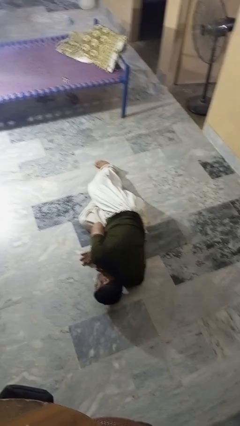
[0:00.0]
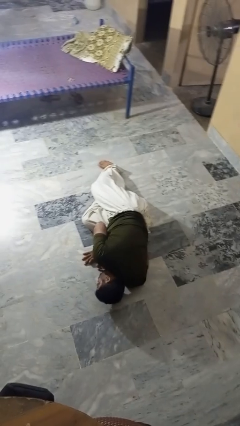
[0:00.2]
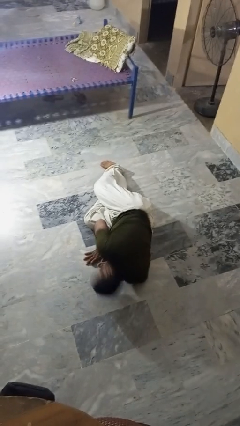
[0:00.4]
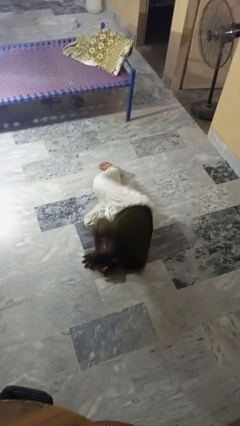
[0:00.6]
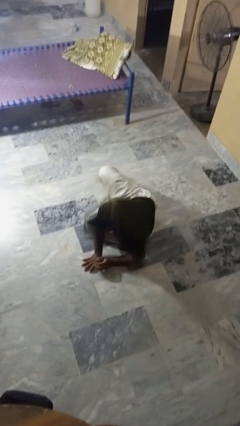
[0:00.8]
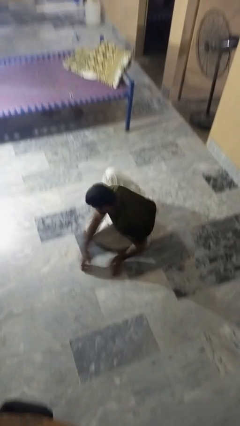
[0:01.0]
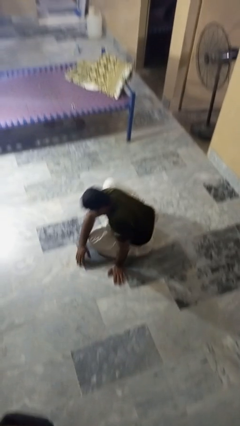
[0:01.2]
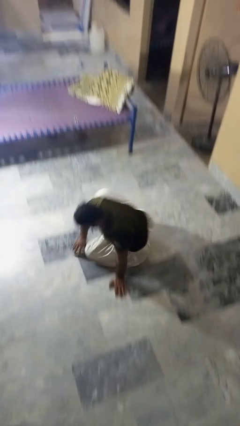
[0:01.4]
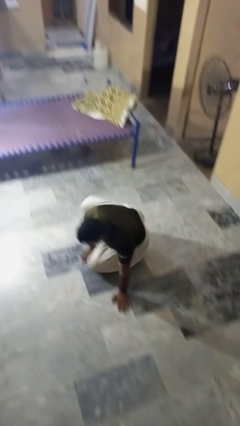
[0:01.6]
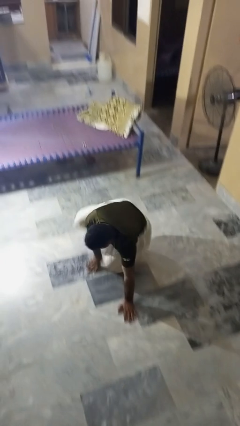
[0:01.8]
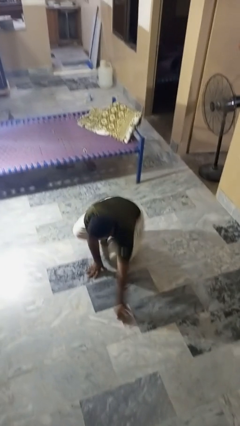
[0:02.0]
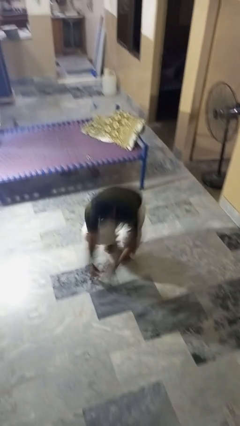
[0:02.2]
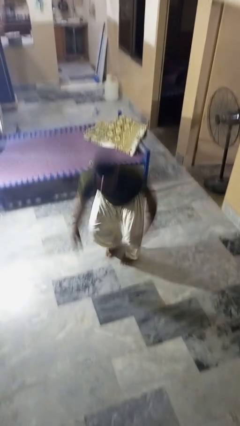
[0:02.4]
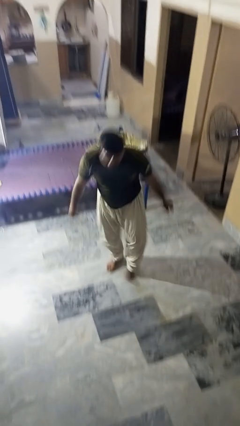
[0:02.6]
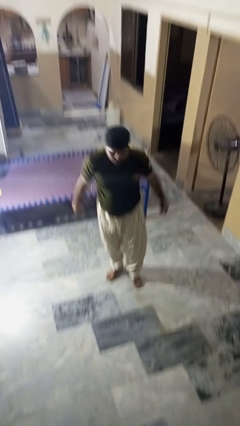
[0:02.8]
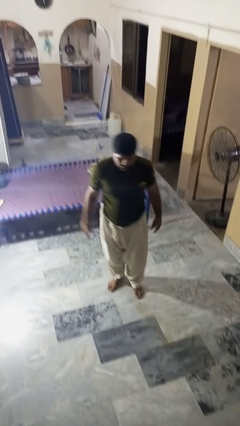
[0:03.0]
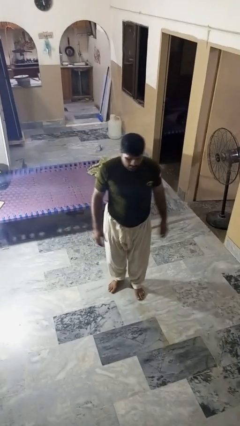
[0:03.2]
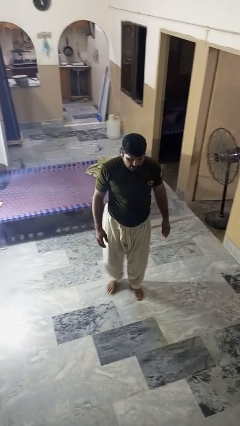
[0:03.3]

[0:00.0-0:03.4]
person stands up from floor

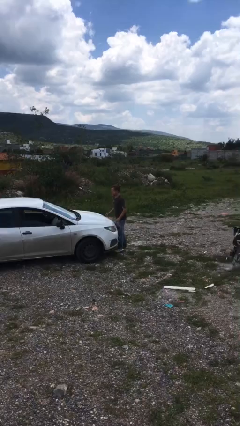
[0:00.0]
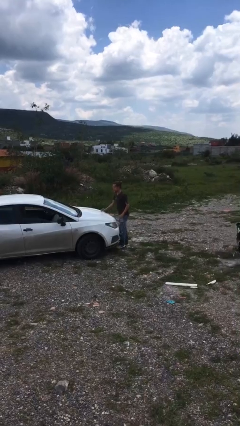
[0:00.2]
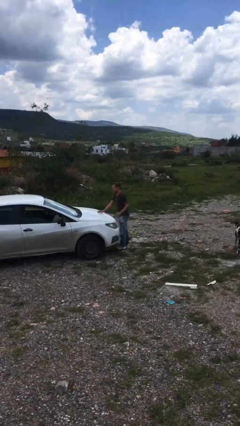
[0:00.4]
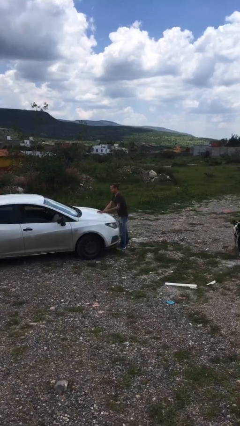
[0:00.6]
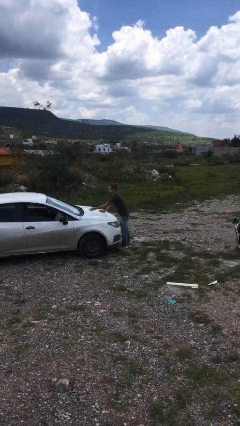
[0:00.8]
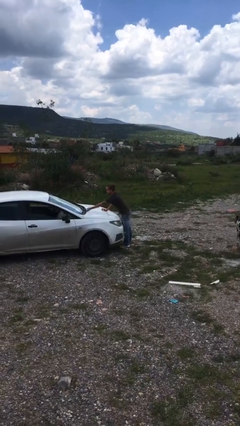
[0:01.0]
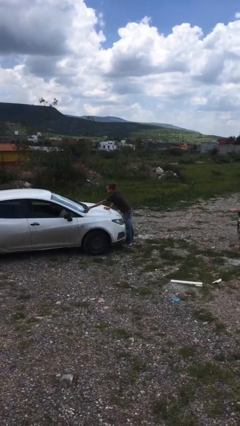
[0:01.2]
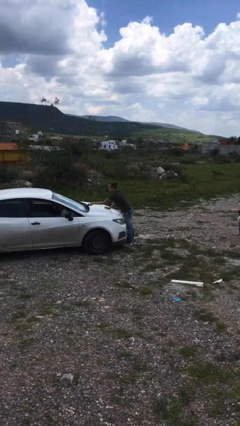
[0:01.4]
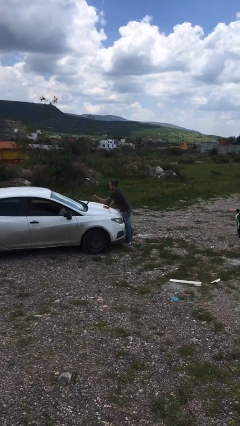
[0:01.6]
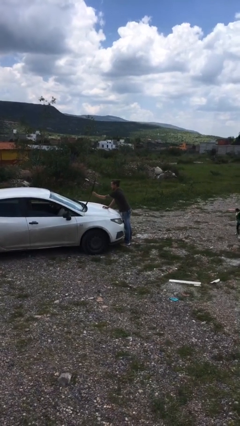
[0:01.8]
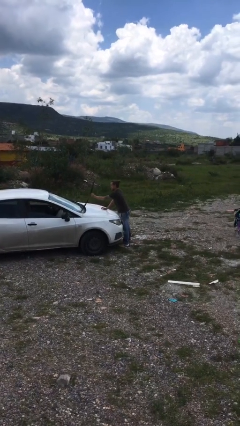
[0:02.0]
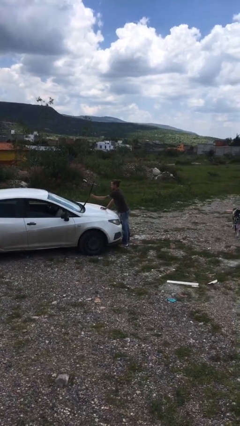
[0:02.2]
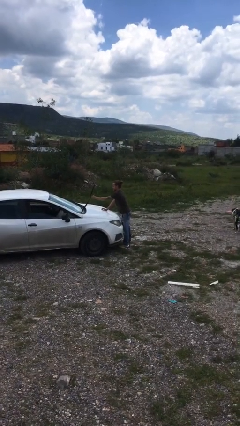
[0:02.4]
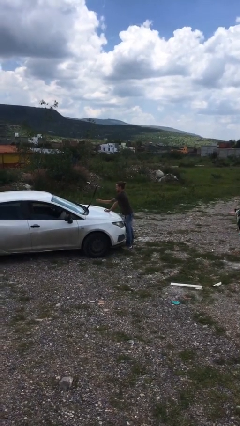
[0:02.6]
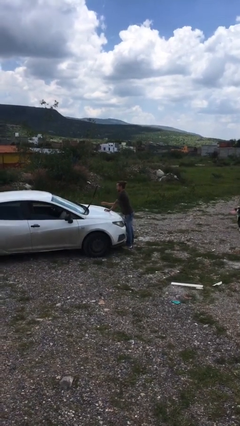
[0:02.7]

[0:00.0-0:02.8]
person flips up car wipers

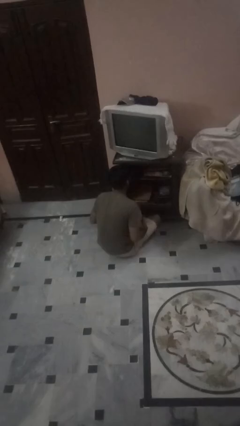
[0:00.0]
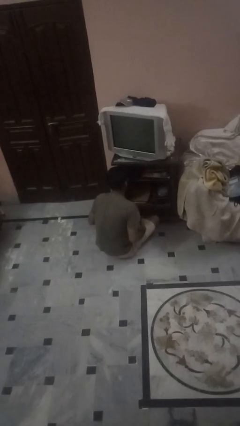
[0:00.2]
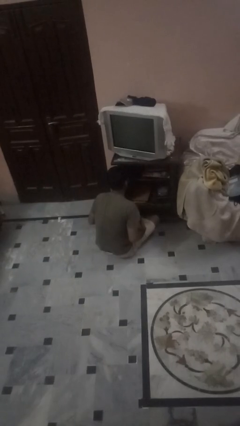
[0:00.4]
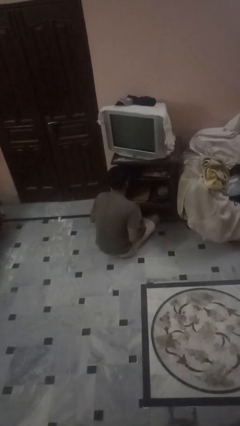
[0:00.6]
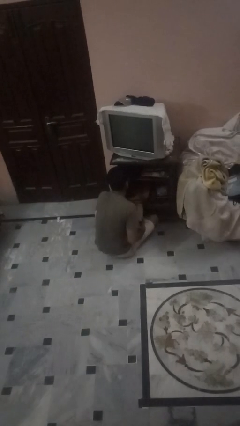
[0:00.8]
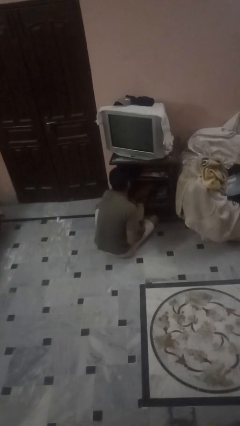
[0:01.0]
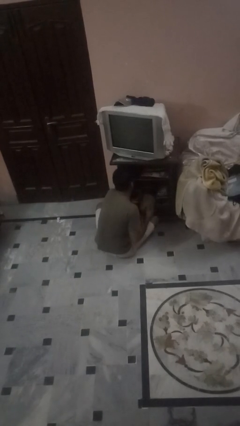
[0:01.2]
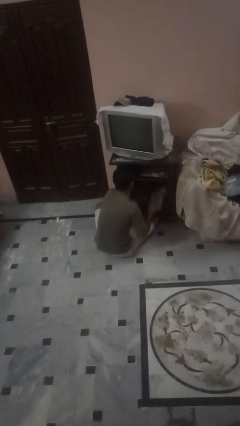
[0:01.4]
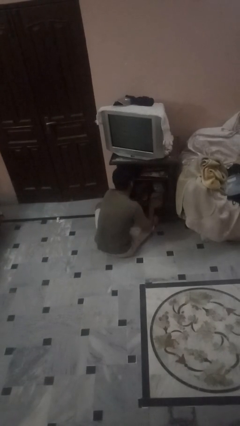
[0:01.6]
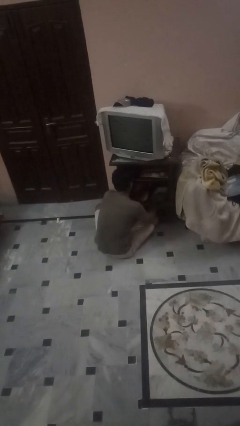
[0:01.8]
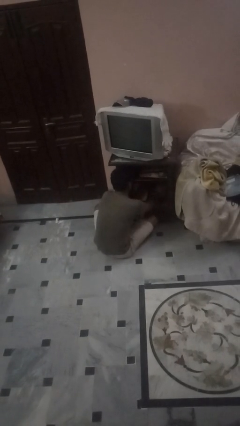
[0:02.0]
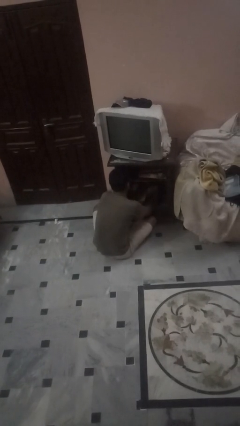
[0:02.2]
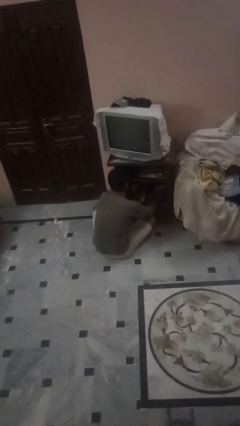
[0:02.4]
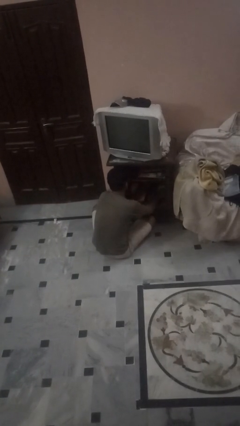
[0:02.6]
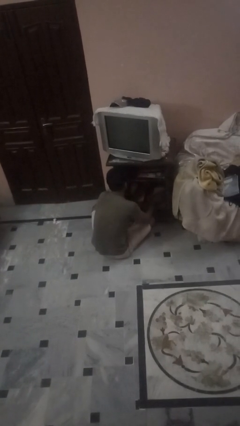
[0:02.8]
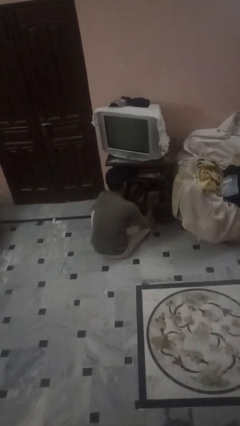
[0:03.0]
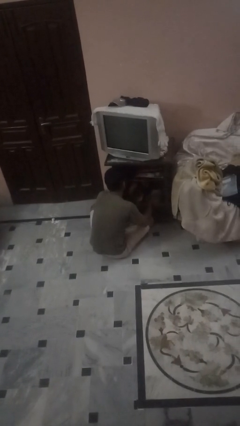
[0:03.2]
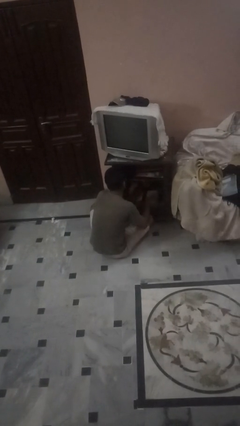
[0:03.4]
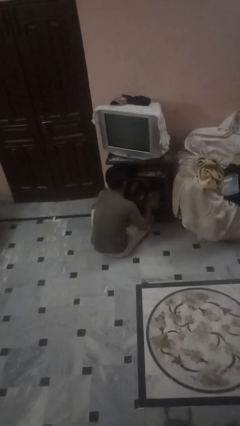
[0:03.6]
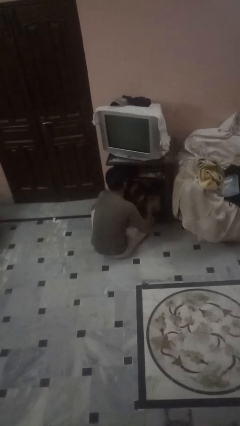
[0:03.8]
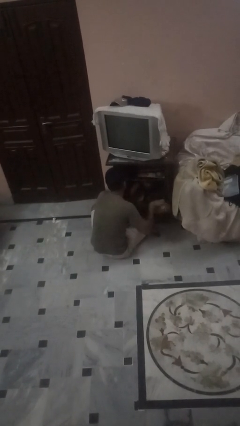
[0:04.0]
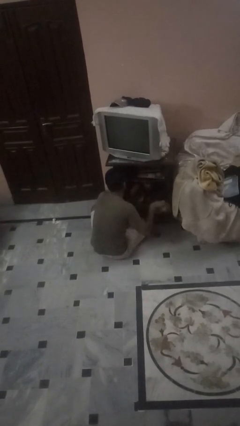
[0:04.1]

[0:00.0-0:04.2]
person dusts furniture

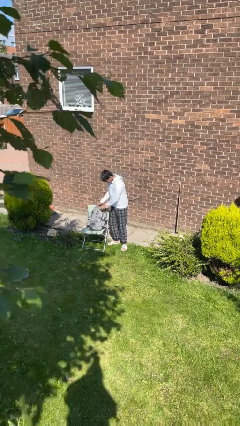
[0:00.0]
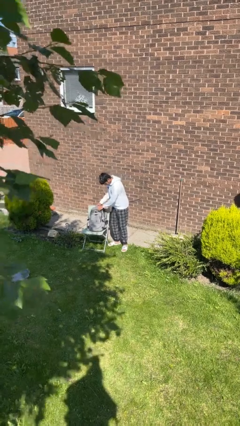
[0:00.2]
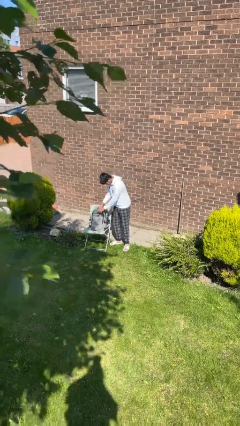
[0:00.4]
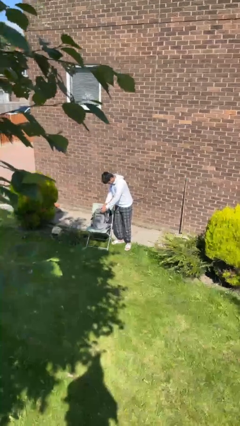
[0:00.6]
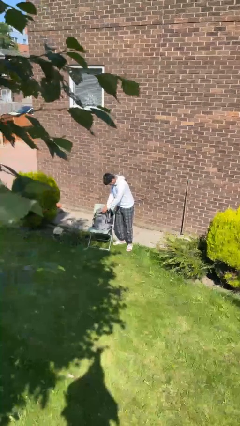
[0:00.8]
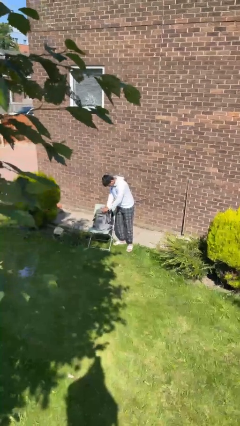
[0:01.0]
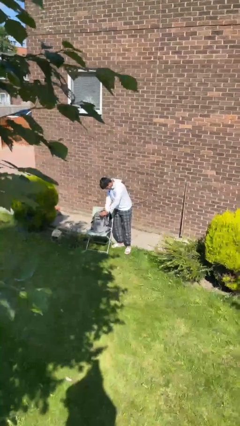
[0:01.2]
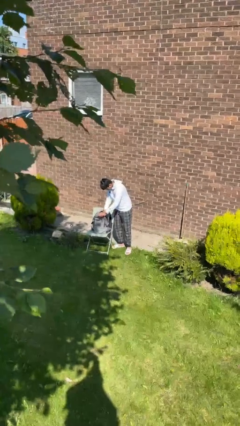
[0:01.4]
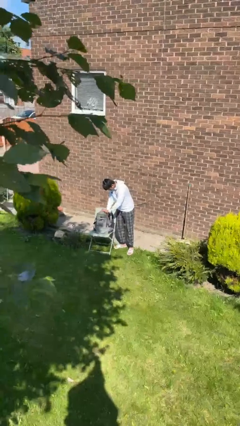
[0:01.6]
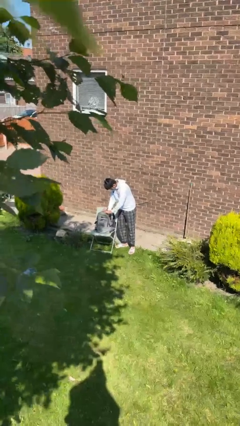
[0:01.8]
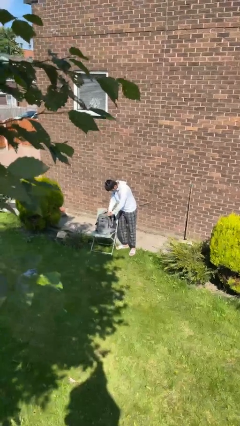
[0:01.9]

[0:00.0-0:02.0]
person searches in backpack

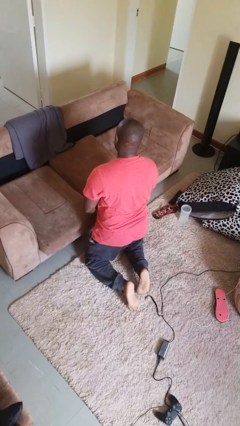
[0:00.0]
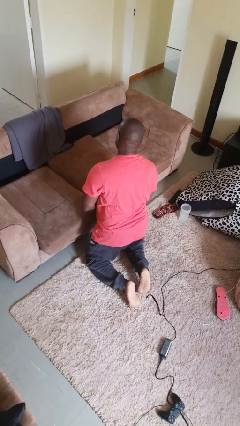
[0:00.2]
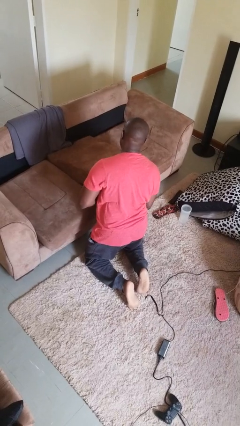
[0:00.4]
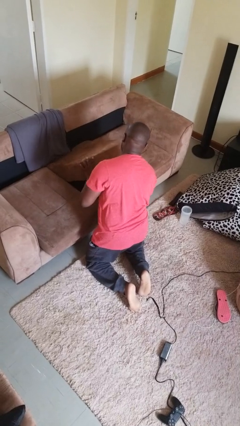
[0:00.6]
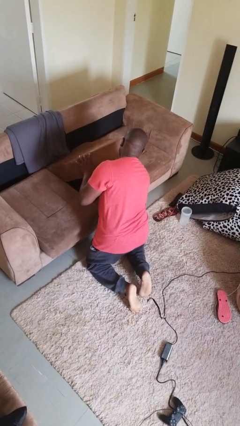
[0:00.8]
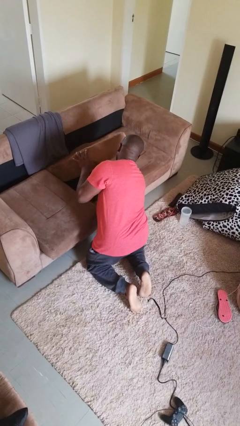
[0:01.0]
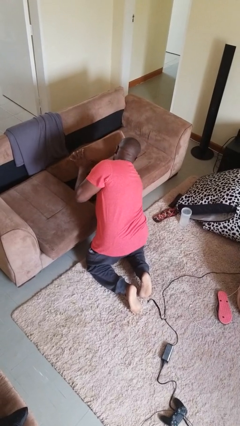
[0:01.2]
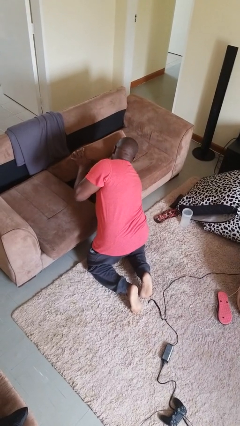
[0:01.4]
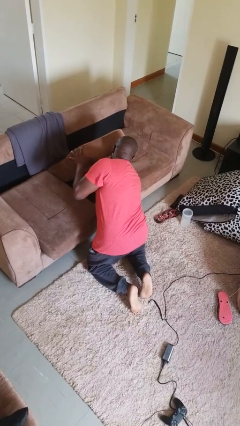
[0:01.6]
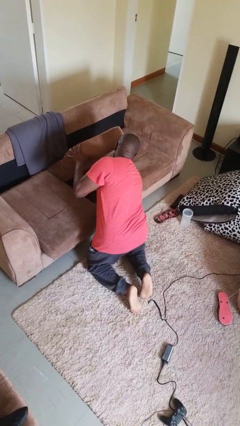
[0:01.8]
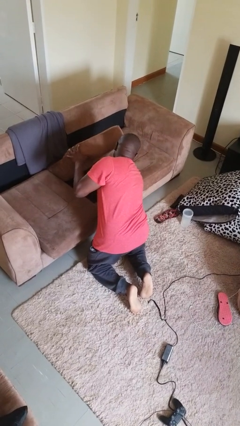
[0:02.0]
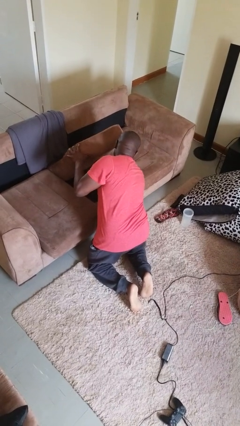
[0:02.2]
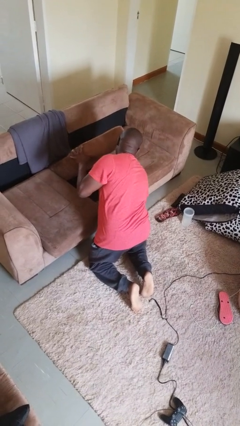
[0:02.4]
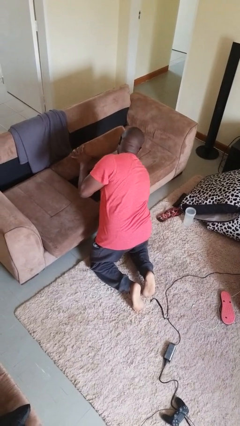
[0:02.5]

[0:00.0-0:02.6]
person searches under couch

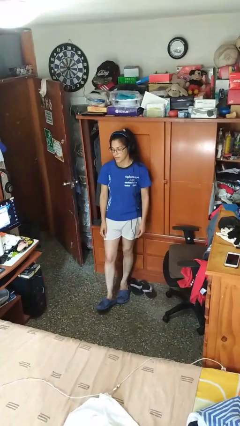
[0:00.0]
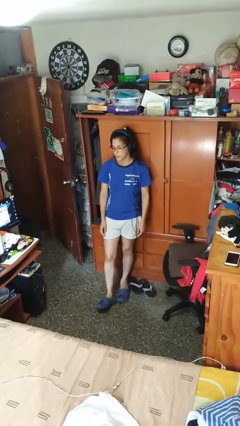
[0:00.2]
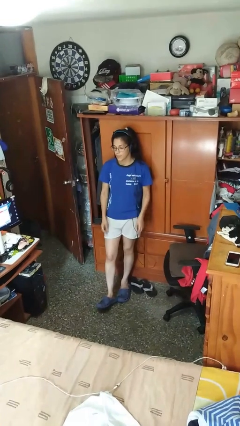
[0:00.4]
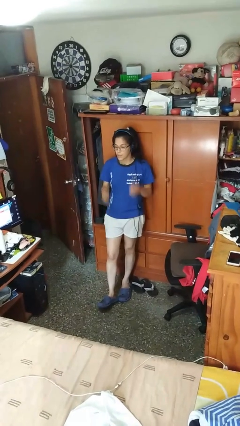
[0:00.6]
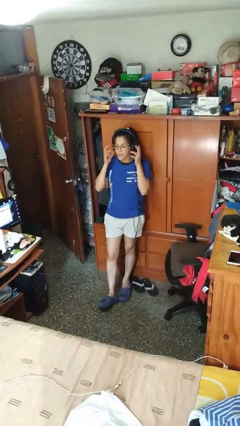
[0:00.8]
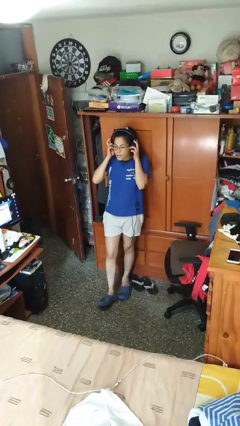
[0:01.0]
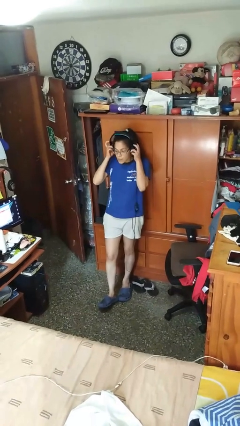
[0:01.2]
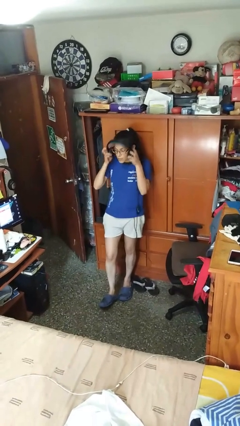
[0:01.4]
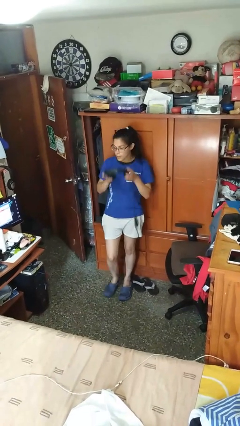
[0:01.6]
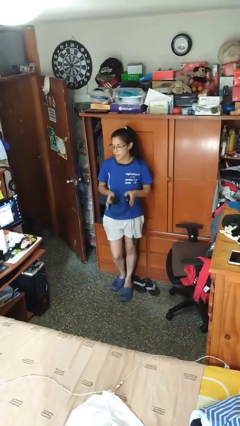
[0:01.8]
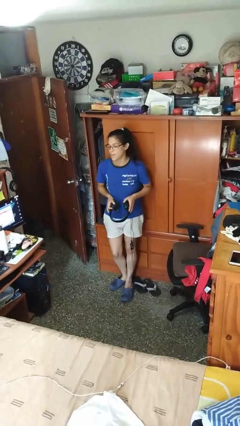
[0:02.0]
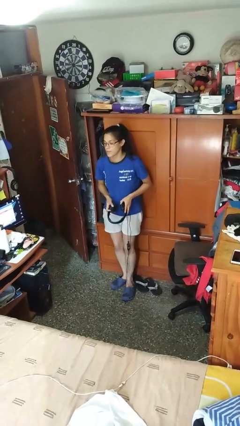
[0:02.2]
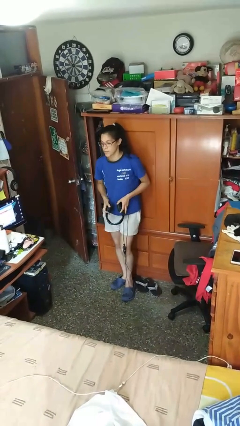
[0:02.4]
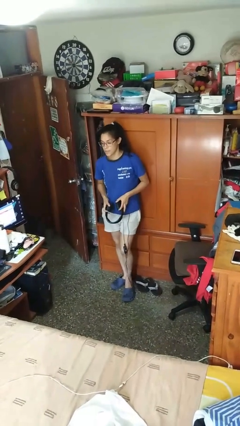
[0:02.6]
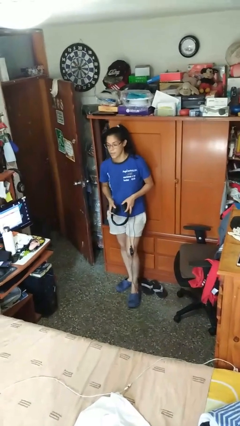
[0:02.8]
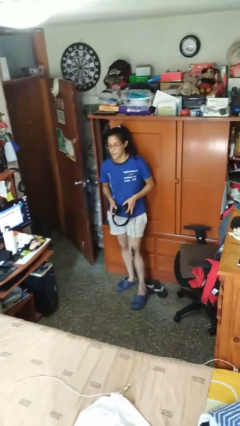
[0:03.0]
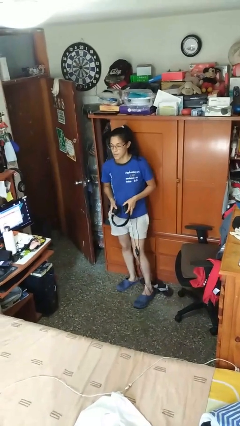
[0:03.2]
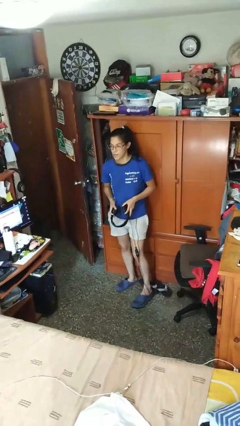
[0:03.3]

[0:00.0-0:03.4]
person takes off headphones
